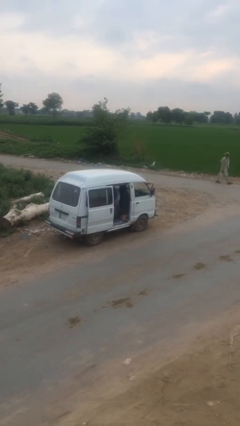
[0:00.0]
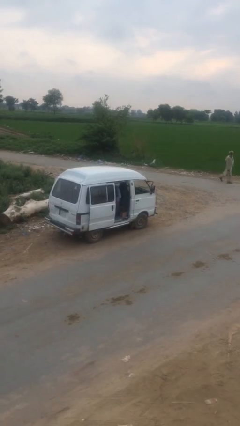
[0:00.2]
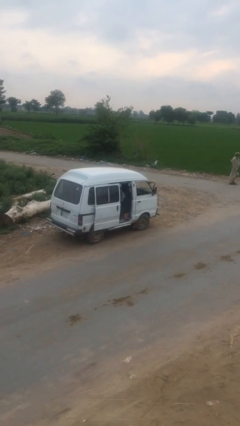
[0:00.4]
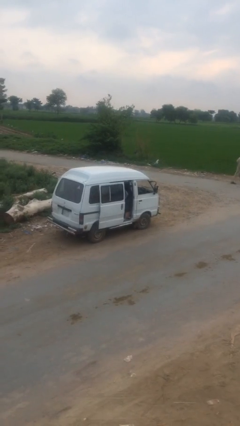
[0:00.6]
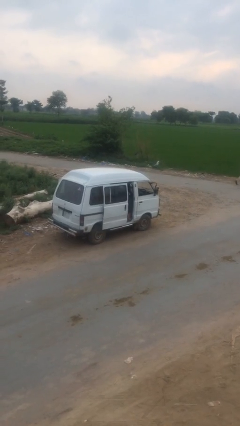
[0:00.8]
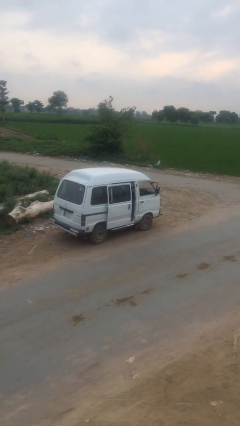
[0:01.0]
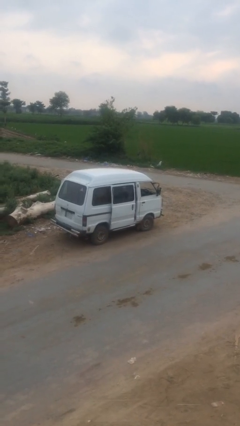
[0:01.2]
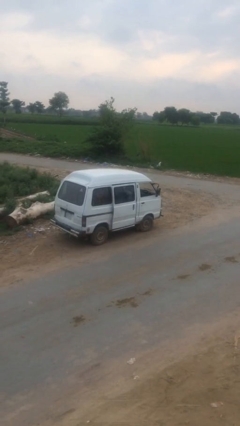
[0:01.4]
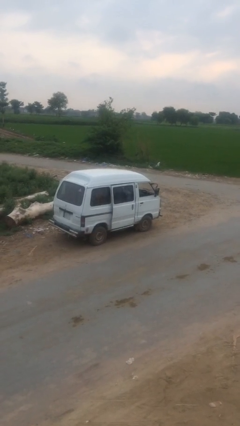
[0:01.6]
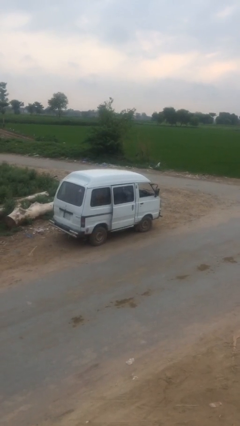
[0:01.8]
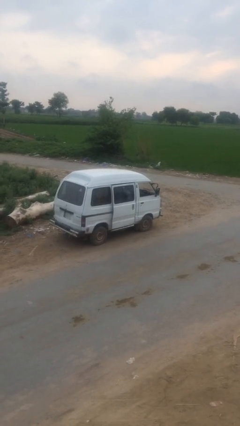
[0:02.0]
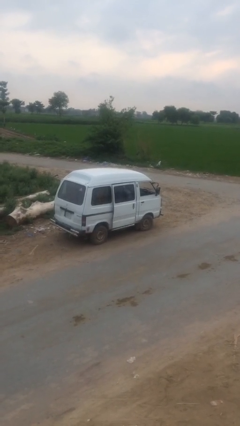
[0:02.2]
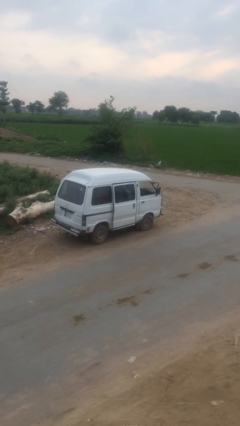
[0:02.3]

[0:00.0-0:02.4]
person closes car door

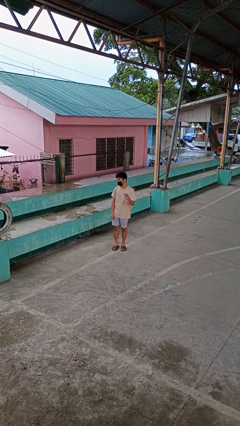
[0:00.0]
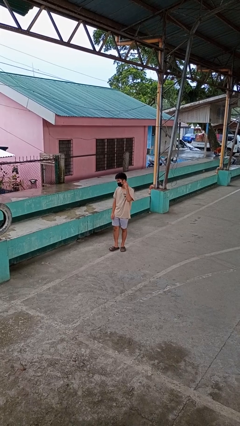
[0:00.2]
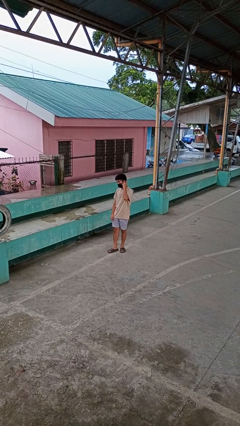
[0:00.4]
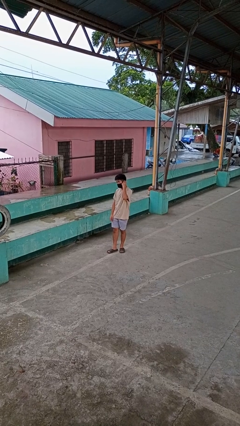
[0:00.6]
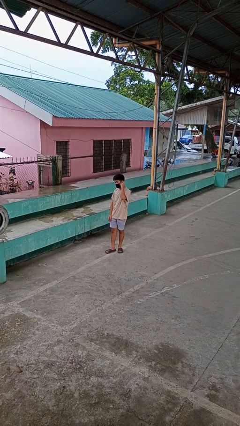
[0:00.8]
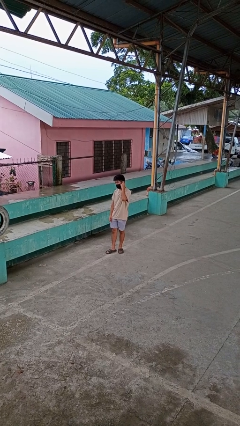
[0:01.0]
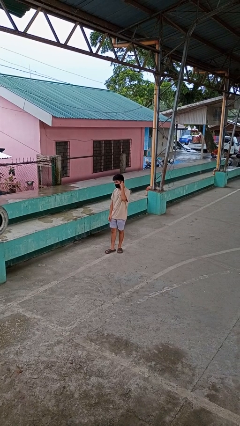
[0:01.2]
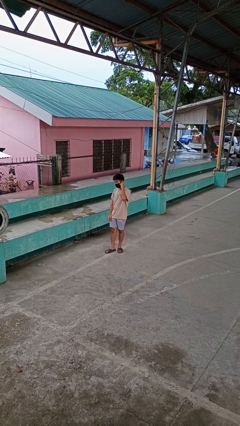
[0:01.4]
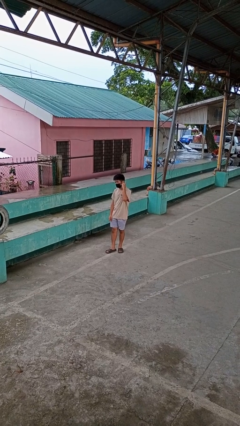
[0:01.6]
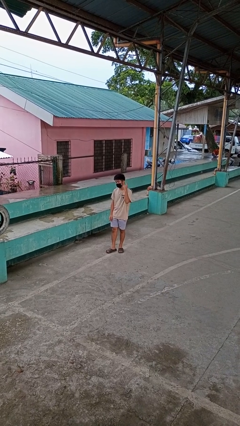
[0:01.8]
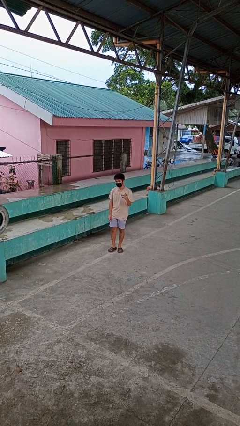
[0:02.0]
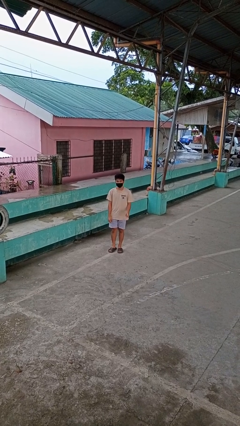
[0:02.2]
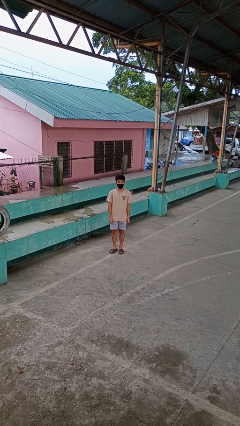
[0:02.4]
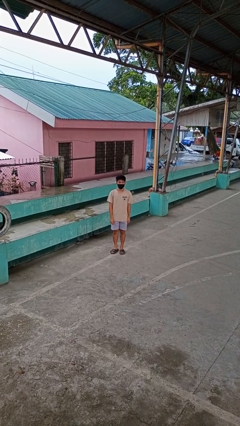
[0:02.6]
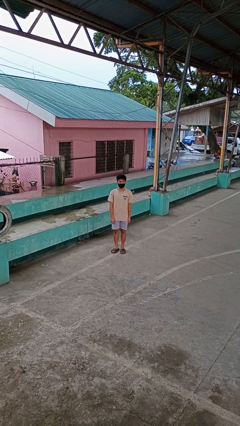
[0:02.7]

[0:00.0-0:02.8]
person gestures listen closely

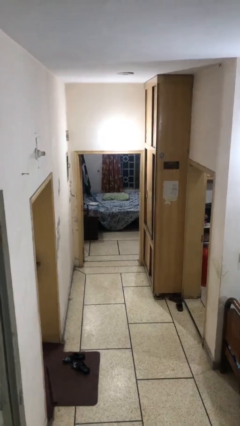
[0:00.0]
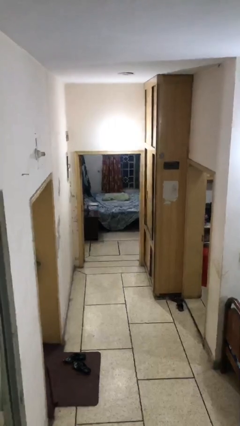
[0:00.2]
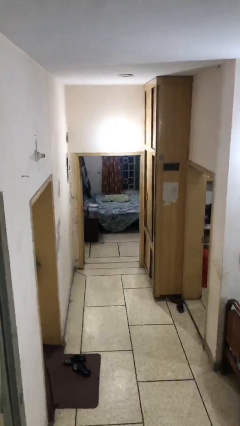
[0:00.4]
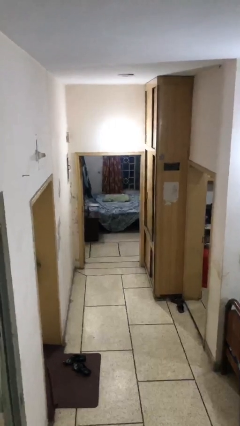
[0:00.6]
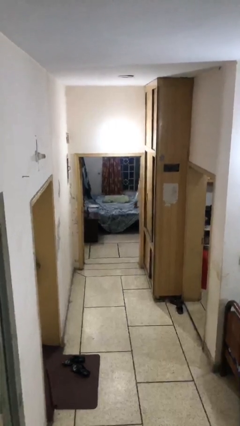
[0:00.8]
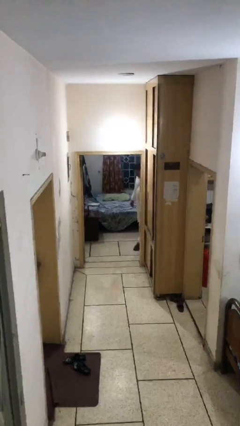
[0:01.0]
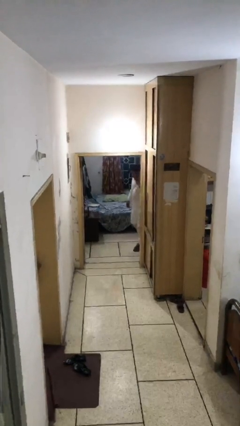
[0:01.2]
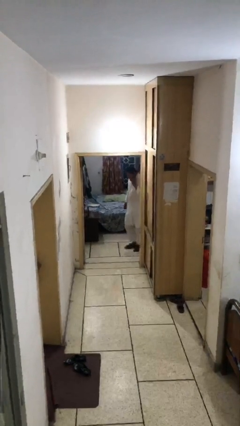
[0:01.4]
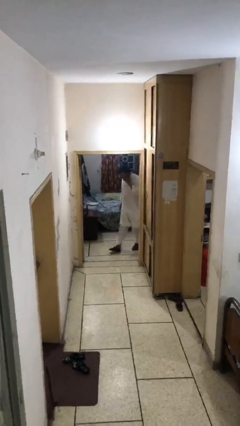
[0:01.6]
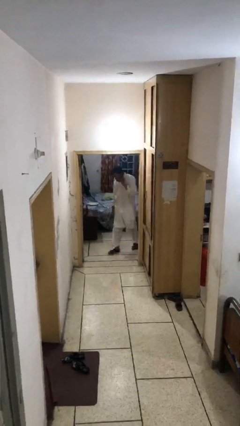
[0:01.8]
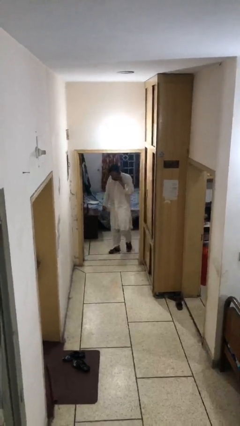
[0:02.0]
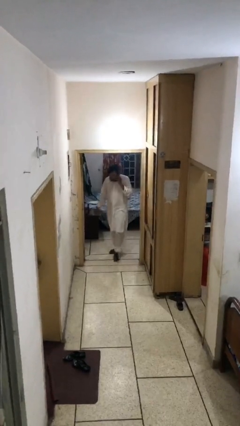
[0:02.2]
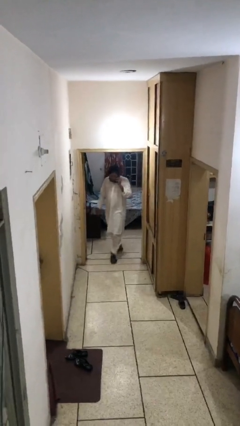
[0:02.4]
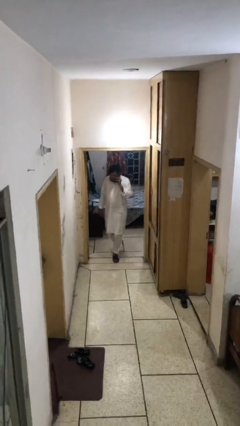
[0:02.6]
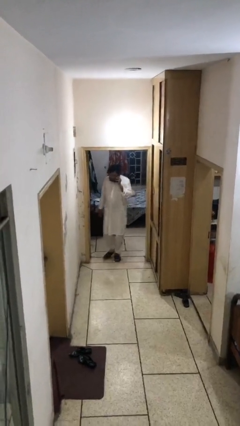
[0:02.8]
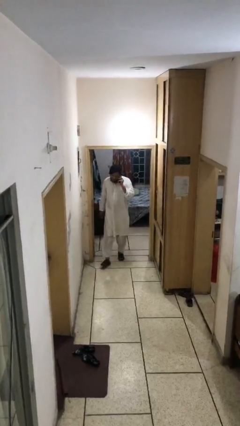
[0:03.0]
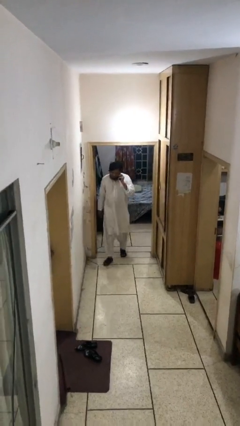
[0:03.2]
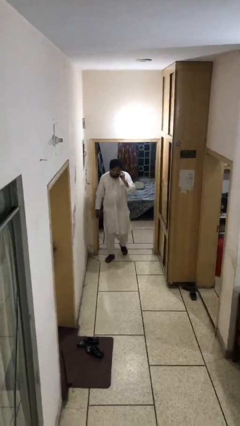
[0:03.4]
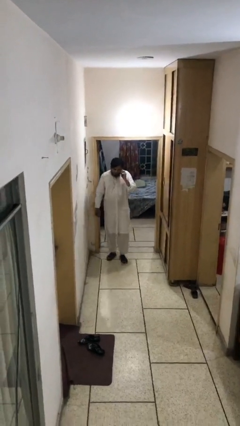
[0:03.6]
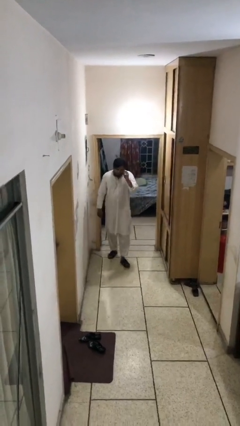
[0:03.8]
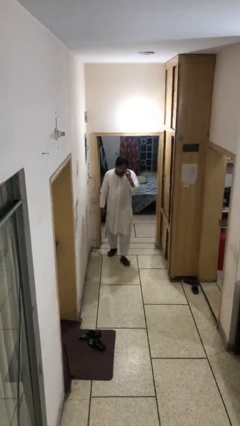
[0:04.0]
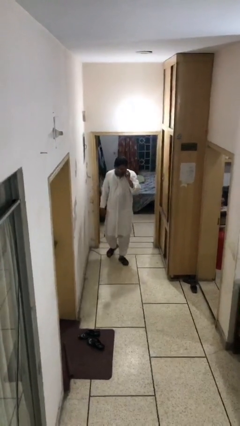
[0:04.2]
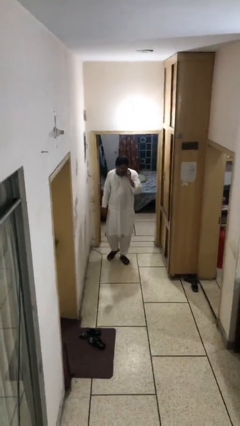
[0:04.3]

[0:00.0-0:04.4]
person enters scene through structure

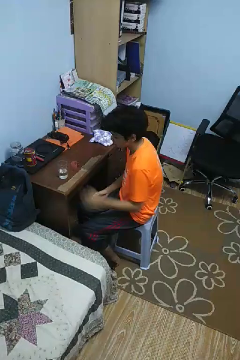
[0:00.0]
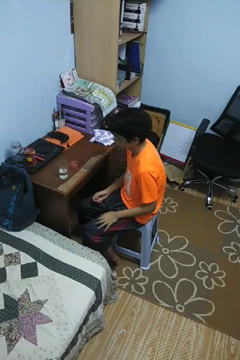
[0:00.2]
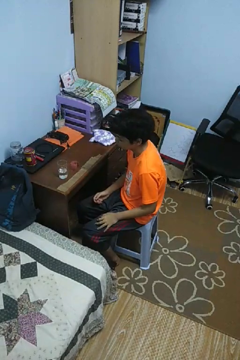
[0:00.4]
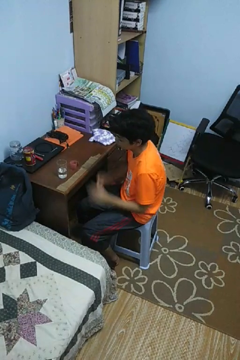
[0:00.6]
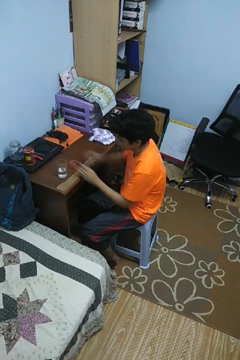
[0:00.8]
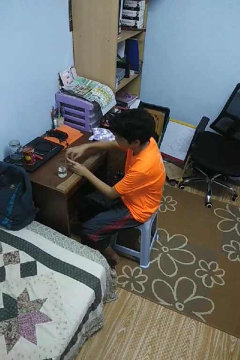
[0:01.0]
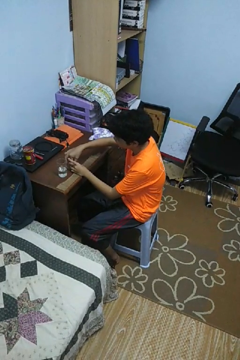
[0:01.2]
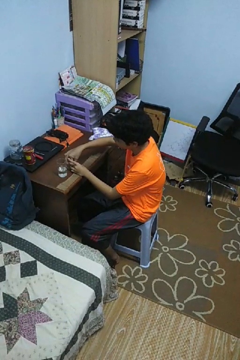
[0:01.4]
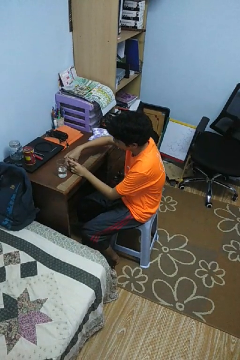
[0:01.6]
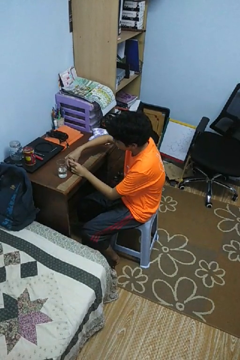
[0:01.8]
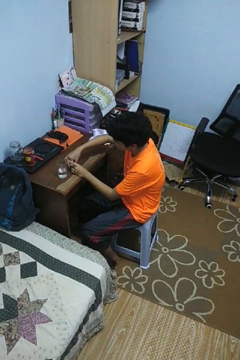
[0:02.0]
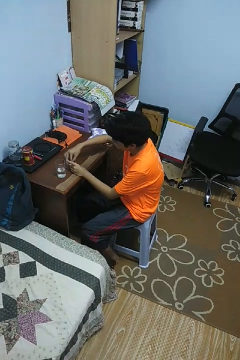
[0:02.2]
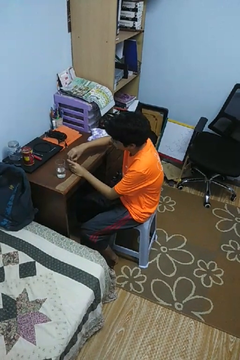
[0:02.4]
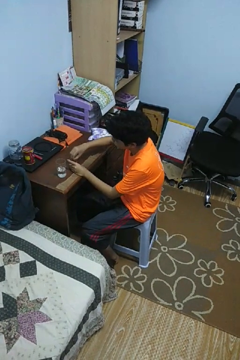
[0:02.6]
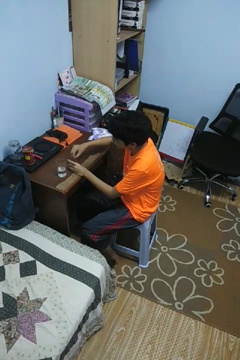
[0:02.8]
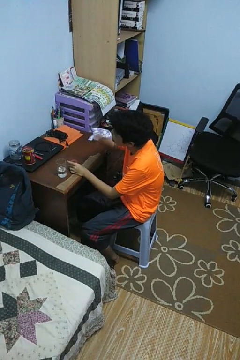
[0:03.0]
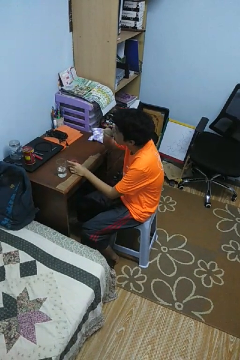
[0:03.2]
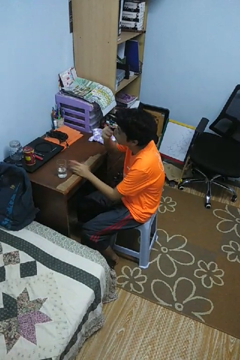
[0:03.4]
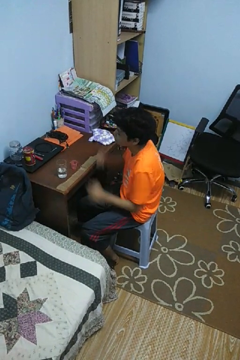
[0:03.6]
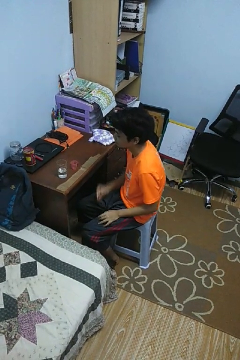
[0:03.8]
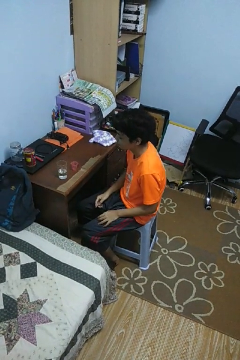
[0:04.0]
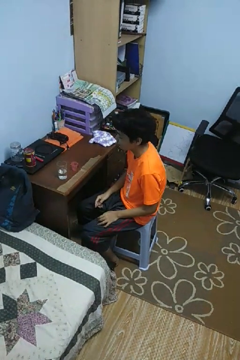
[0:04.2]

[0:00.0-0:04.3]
person takes medicine pills

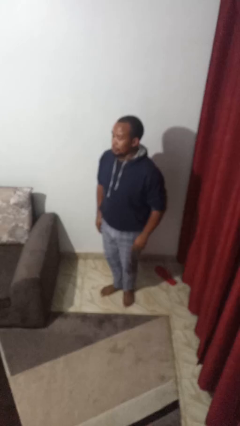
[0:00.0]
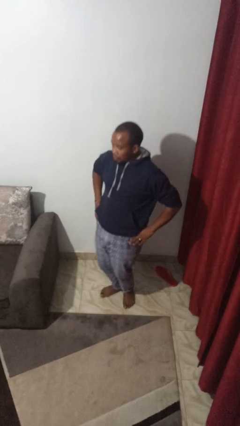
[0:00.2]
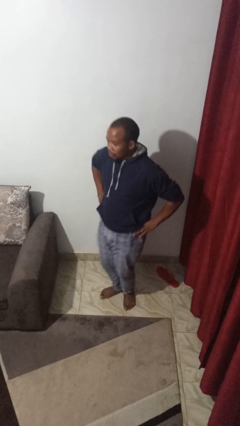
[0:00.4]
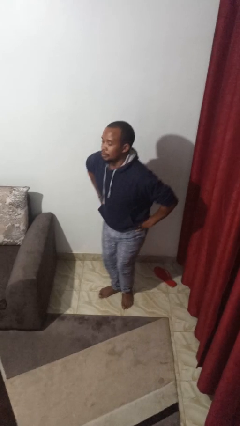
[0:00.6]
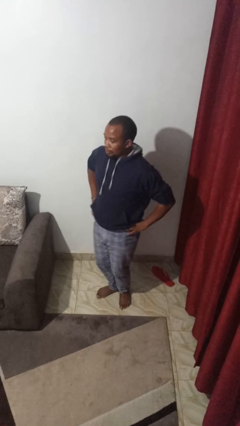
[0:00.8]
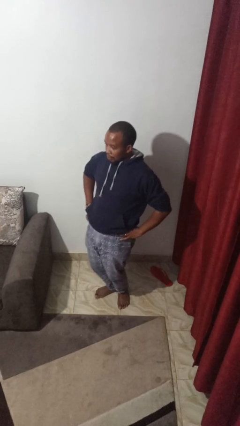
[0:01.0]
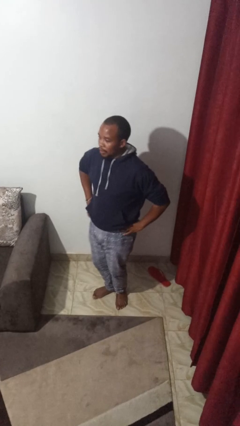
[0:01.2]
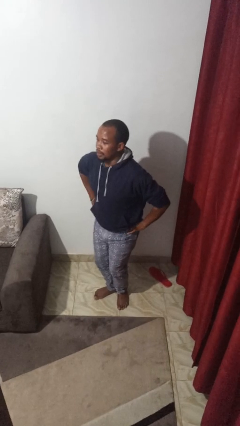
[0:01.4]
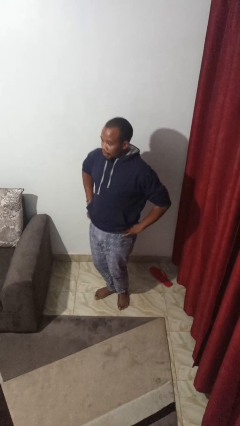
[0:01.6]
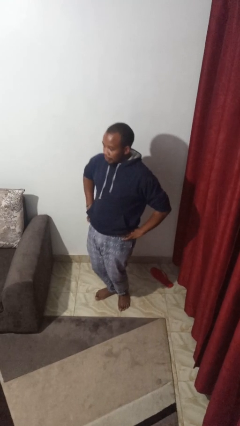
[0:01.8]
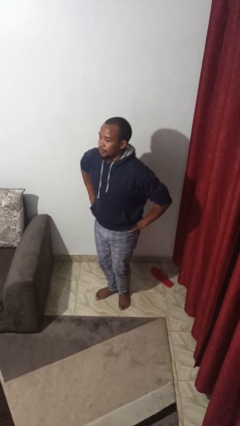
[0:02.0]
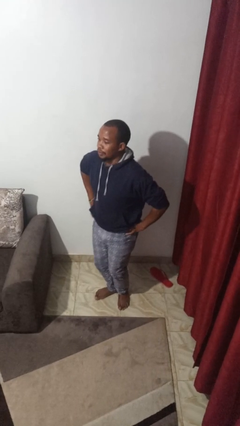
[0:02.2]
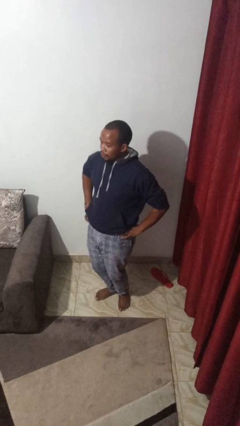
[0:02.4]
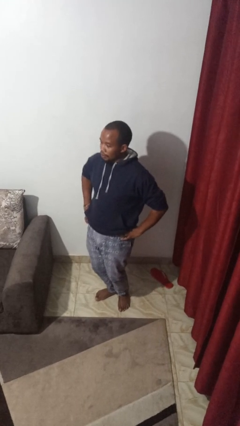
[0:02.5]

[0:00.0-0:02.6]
person wiggles hips

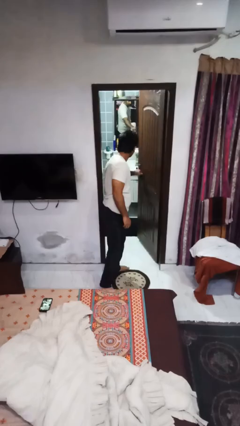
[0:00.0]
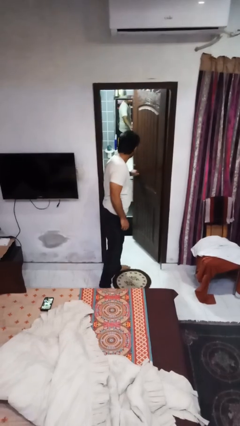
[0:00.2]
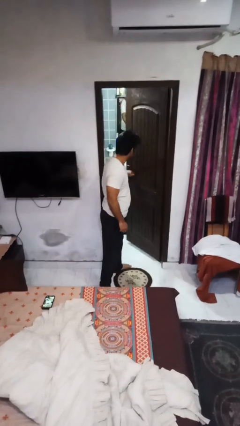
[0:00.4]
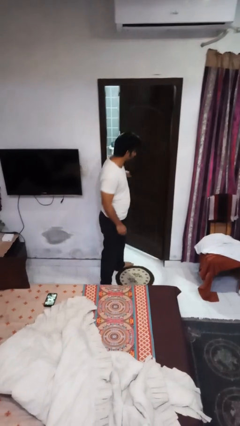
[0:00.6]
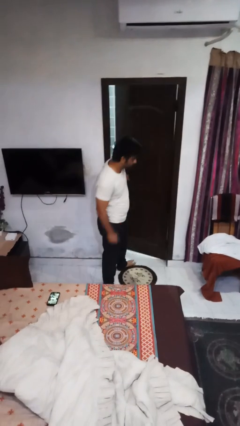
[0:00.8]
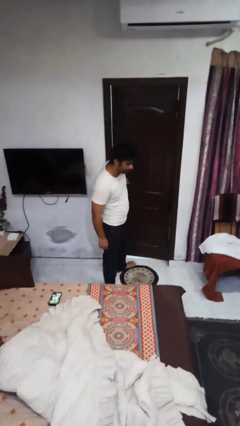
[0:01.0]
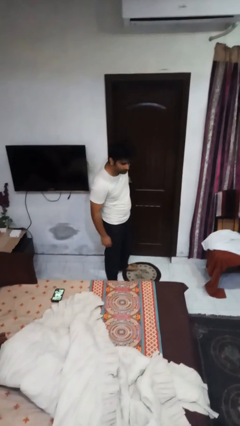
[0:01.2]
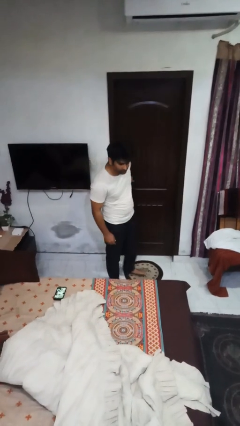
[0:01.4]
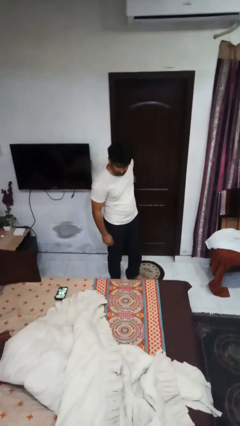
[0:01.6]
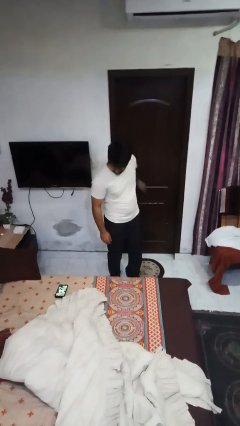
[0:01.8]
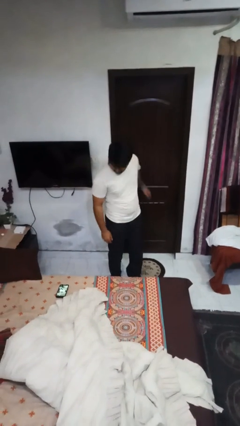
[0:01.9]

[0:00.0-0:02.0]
person closes facility door
